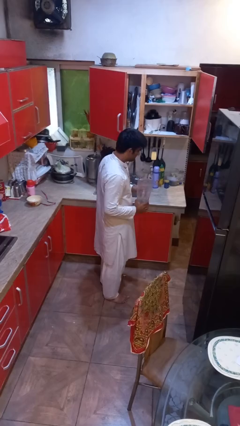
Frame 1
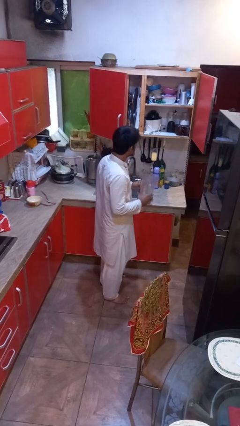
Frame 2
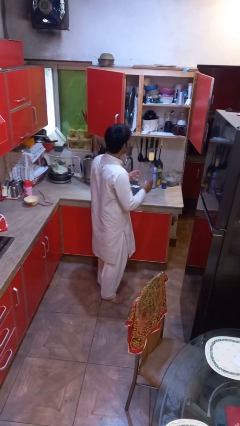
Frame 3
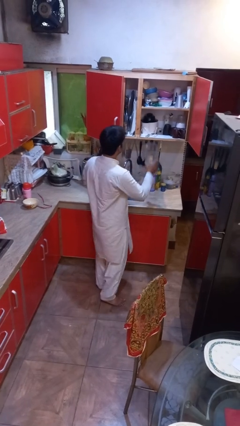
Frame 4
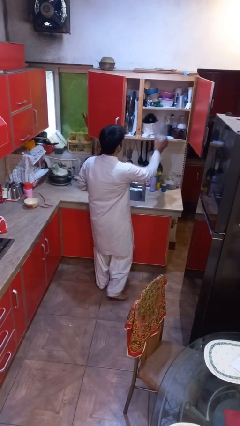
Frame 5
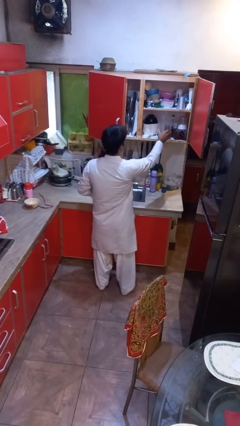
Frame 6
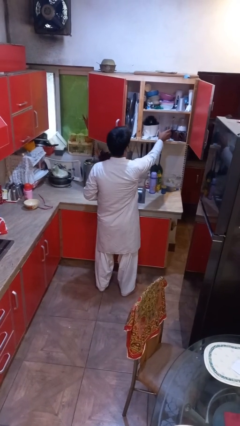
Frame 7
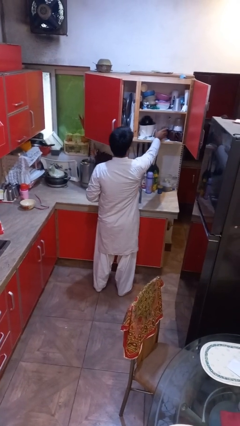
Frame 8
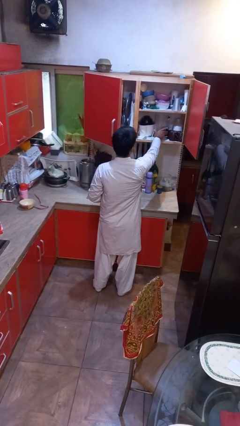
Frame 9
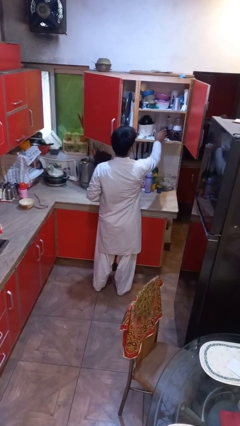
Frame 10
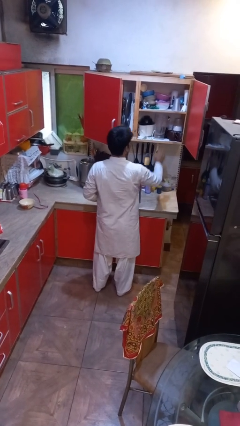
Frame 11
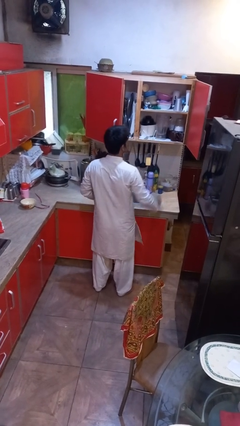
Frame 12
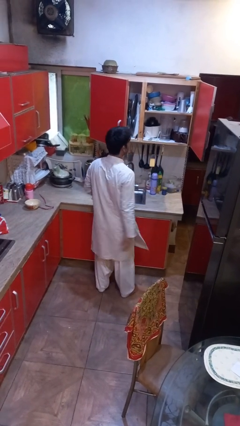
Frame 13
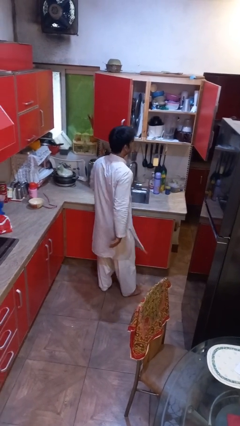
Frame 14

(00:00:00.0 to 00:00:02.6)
person puts down object into cabinet

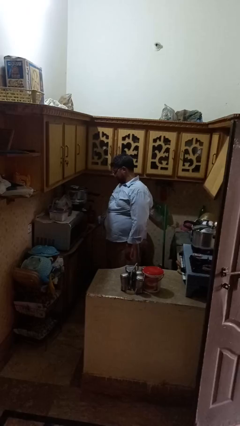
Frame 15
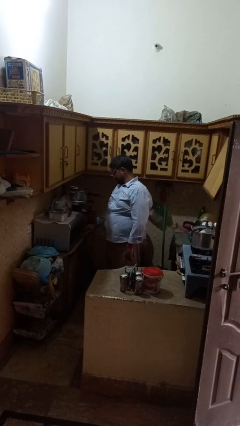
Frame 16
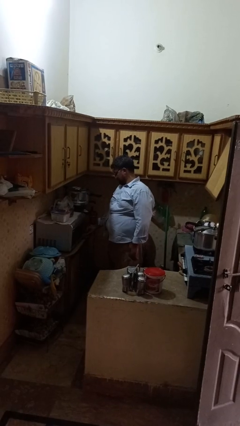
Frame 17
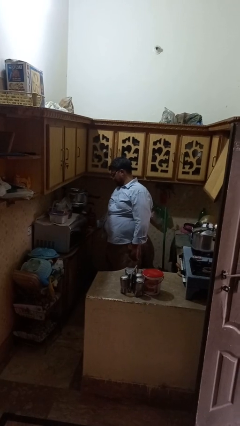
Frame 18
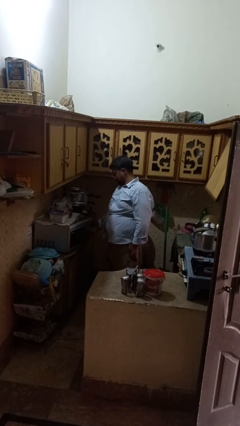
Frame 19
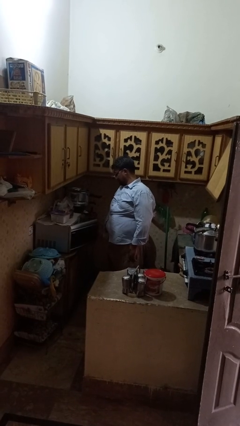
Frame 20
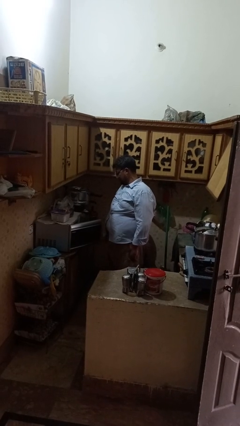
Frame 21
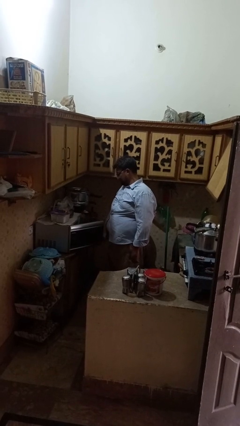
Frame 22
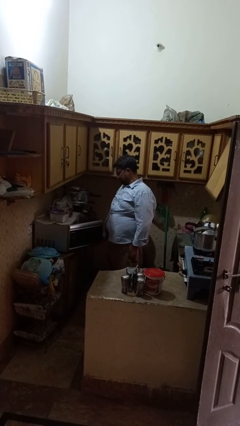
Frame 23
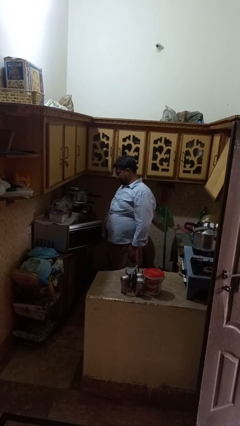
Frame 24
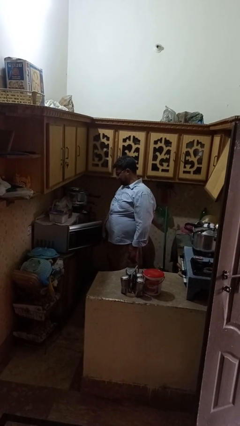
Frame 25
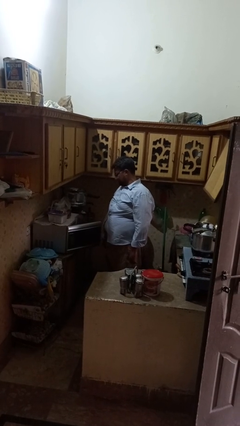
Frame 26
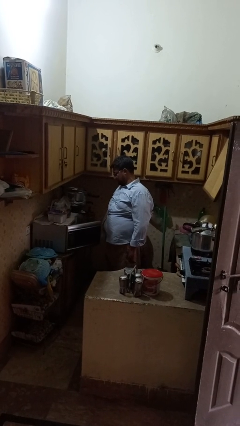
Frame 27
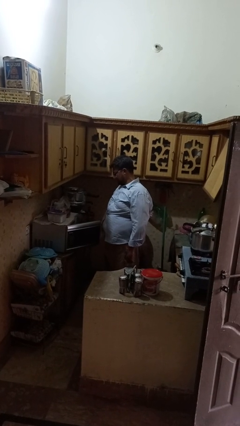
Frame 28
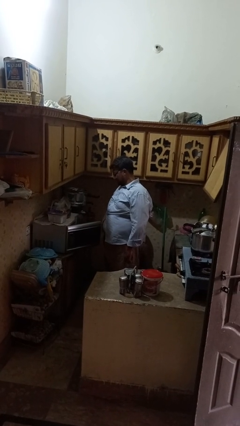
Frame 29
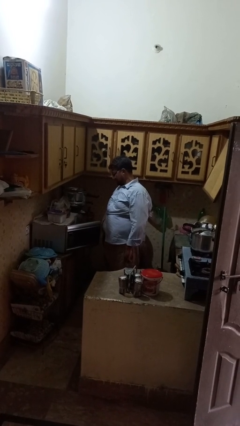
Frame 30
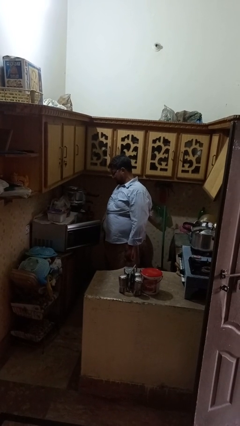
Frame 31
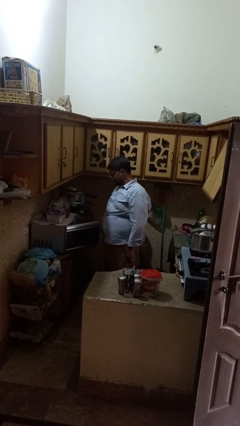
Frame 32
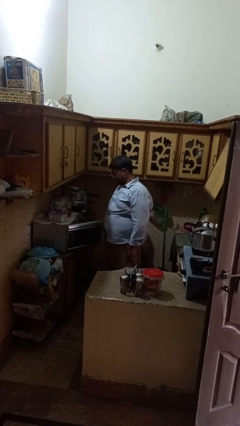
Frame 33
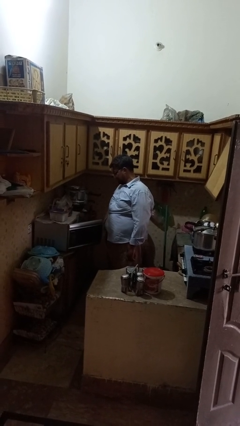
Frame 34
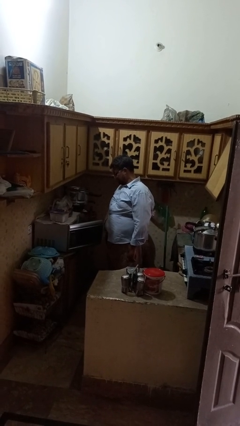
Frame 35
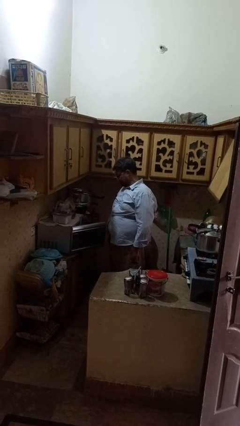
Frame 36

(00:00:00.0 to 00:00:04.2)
person opens microwave

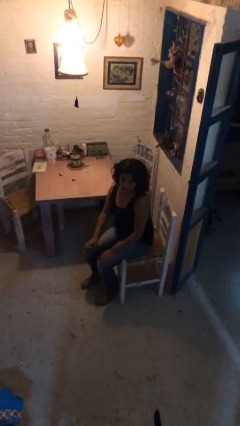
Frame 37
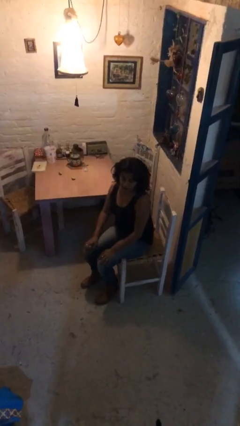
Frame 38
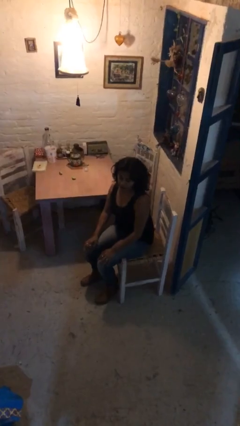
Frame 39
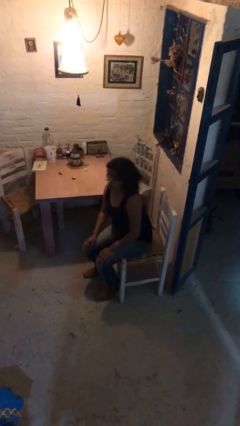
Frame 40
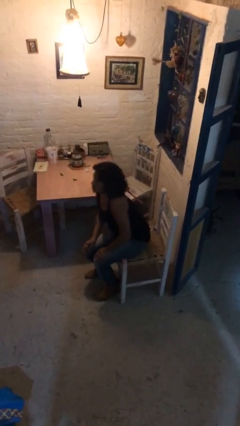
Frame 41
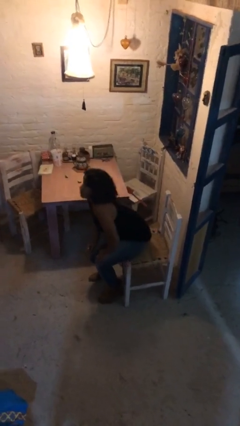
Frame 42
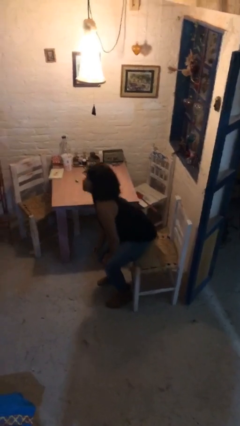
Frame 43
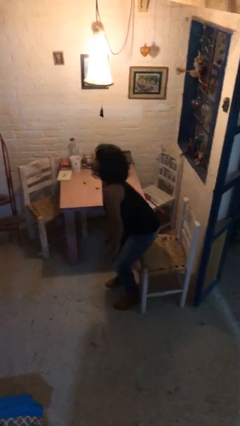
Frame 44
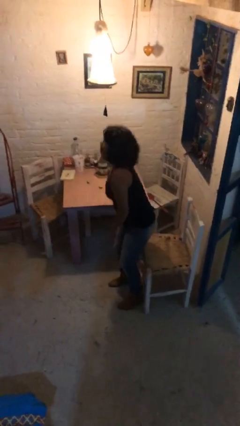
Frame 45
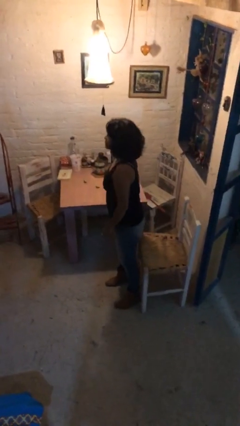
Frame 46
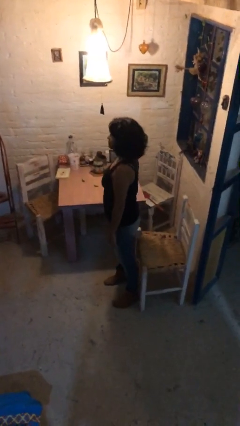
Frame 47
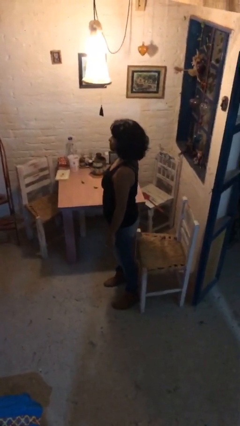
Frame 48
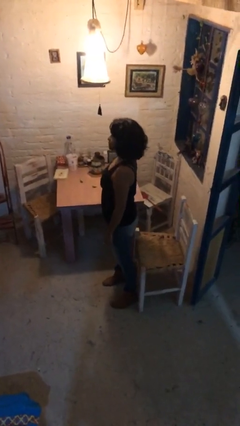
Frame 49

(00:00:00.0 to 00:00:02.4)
person stands up

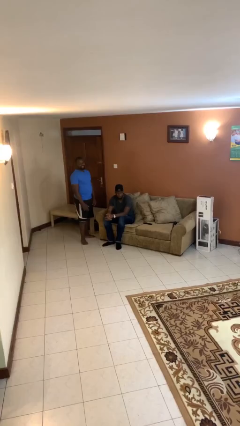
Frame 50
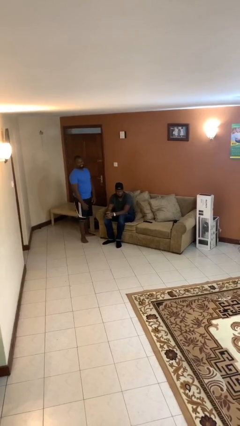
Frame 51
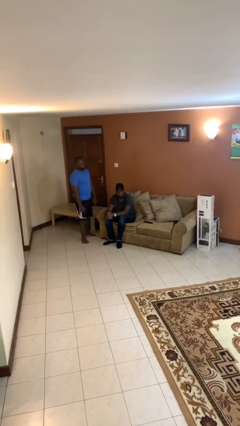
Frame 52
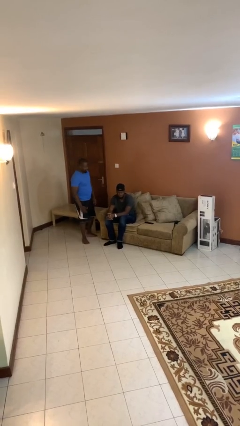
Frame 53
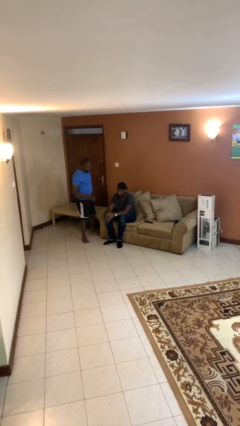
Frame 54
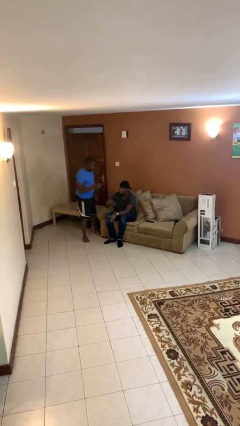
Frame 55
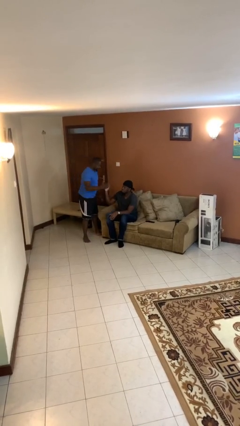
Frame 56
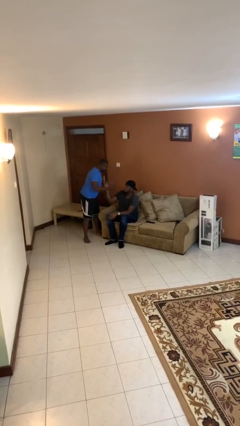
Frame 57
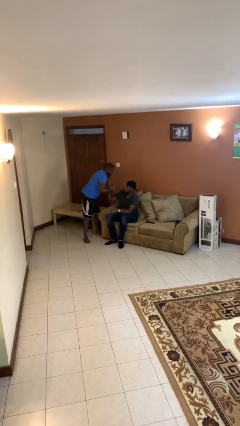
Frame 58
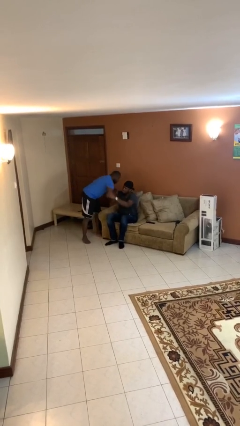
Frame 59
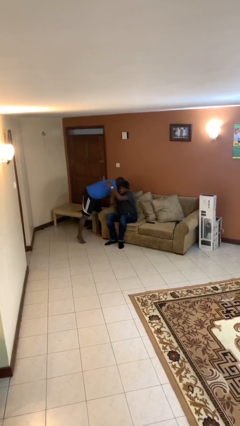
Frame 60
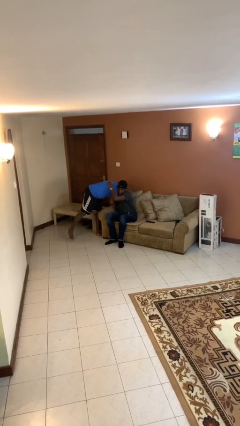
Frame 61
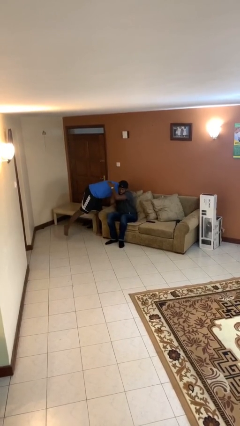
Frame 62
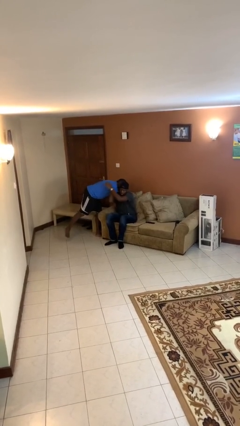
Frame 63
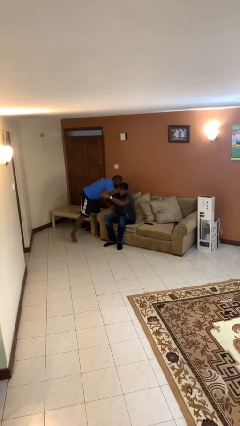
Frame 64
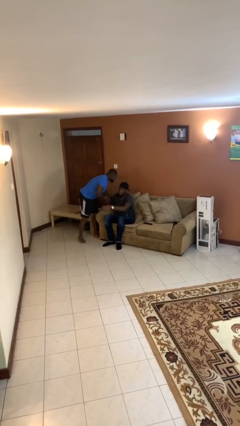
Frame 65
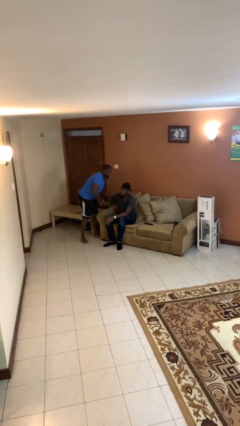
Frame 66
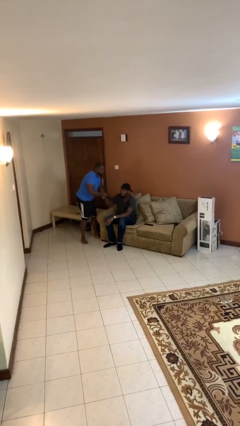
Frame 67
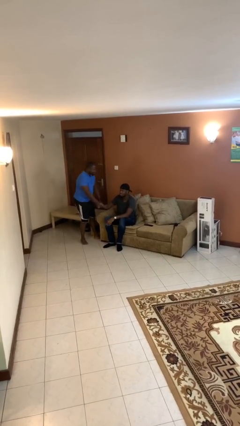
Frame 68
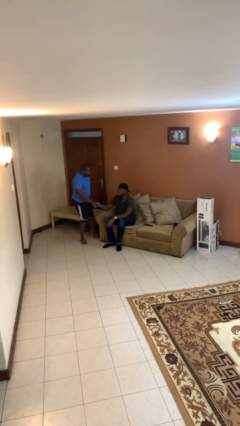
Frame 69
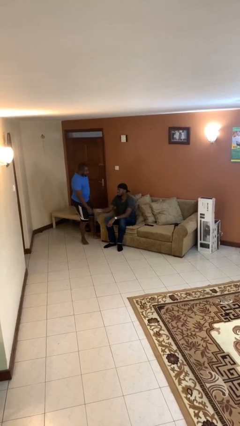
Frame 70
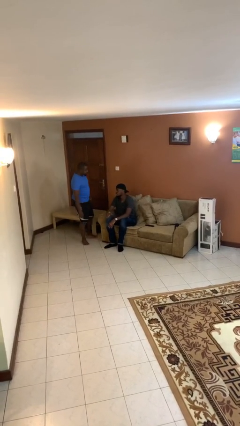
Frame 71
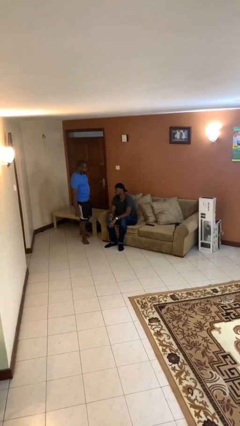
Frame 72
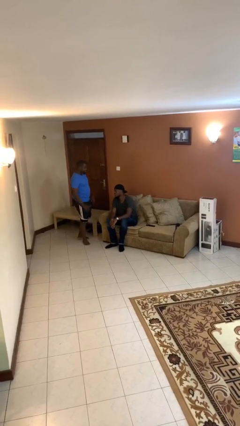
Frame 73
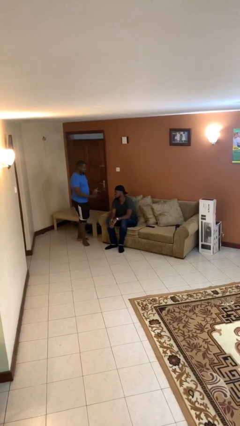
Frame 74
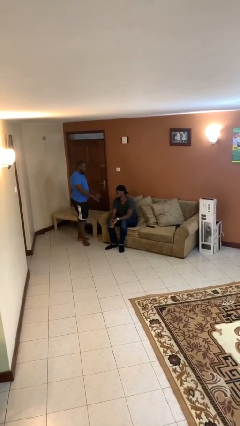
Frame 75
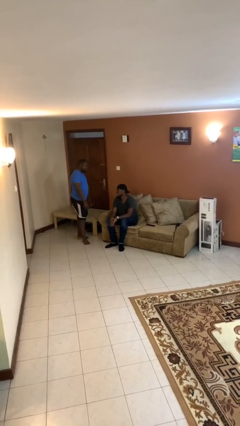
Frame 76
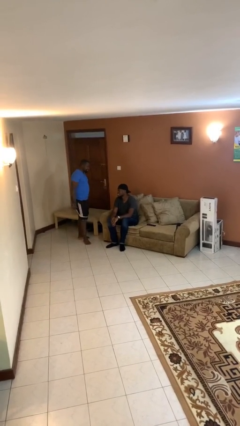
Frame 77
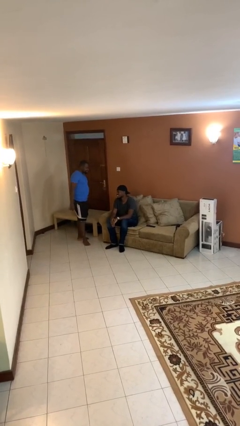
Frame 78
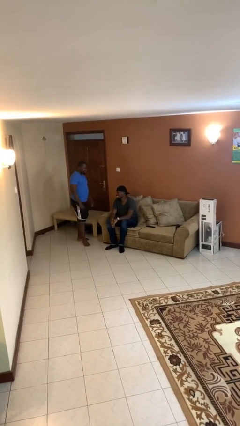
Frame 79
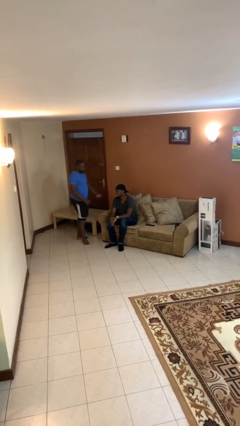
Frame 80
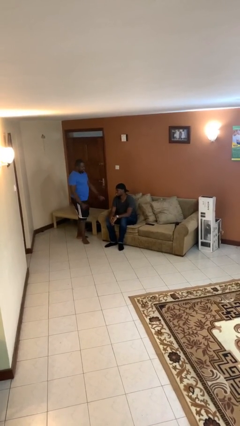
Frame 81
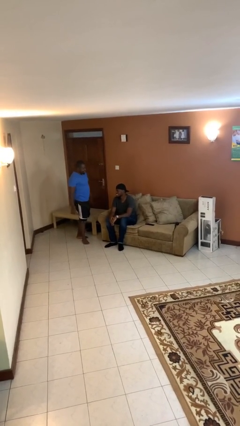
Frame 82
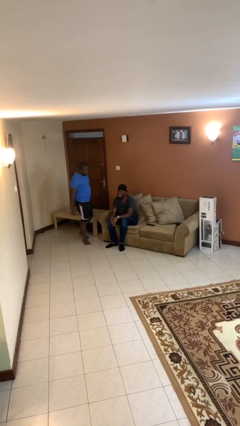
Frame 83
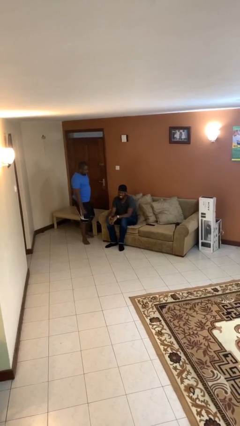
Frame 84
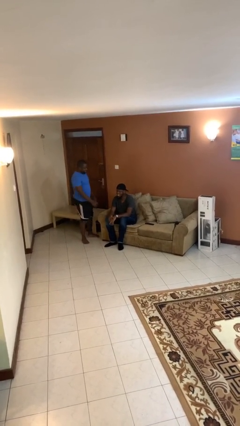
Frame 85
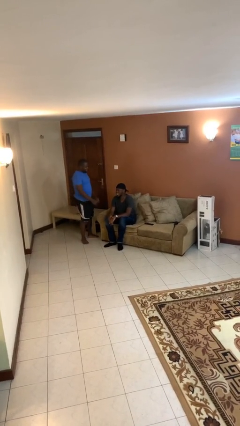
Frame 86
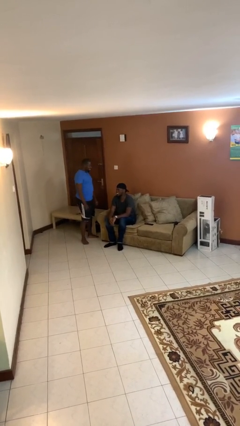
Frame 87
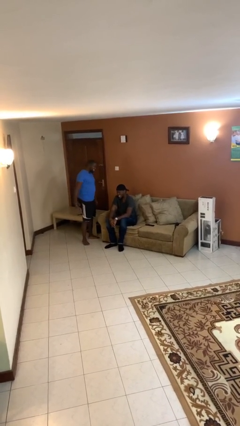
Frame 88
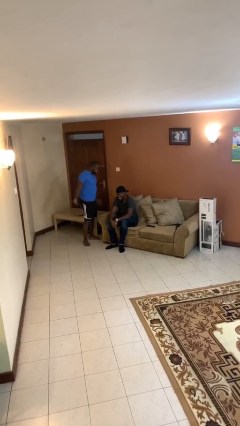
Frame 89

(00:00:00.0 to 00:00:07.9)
person embraces person

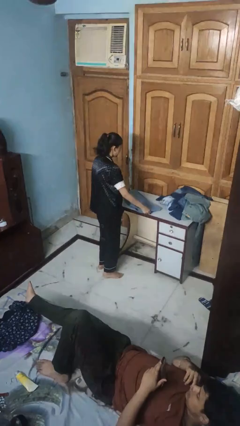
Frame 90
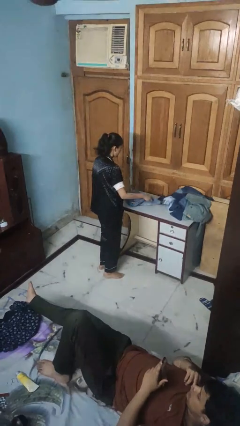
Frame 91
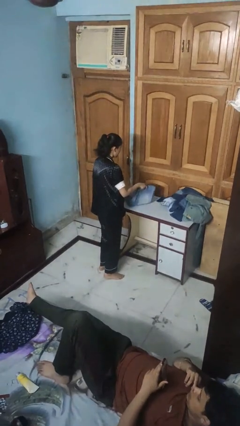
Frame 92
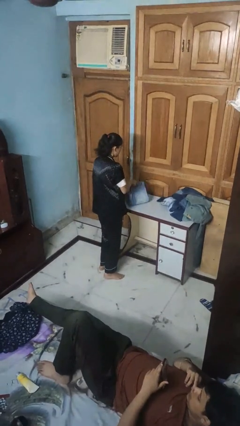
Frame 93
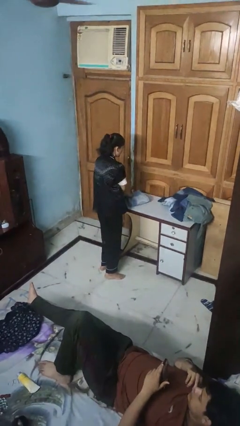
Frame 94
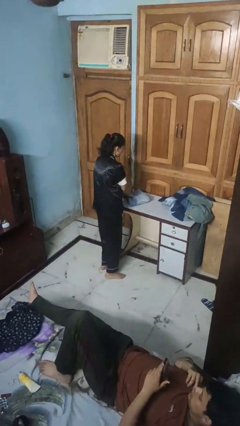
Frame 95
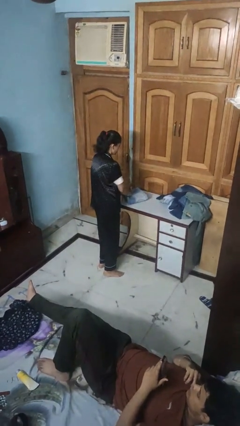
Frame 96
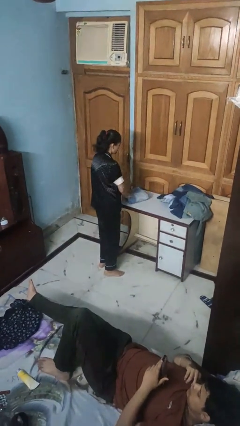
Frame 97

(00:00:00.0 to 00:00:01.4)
person folds pants
